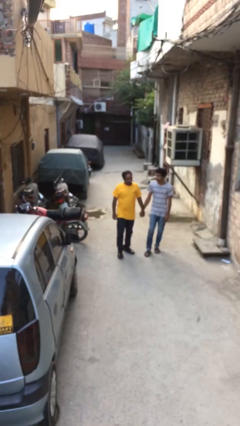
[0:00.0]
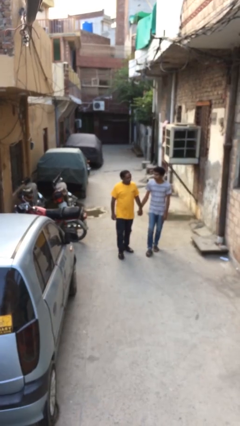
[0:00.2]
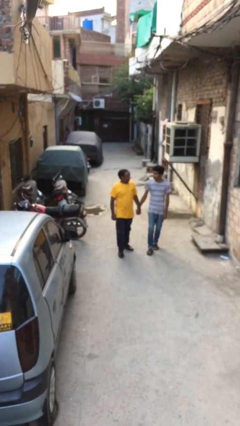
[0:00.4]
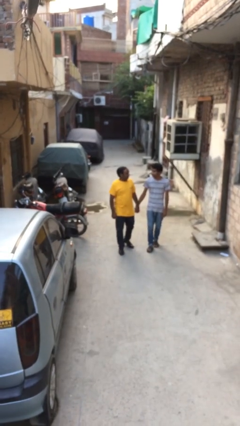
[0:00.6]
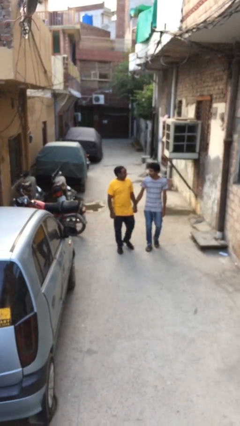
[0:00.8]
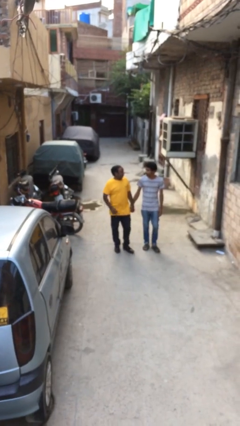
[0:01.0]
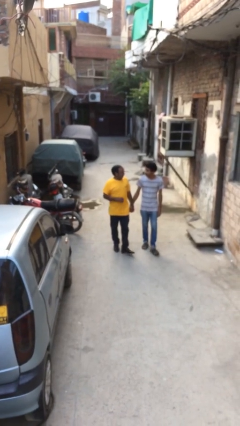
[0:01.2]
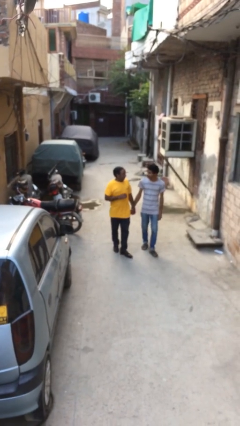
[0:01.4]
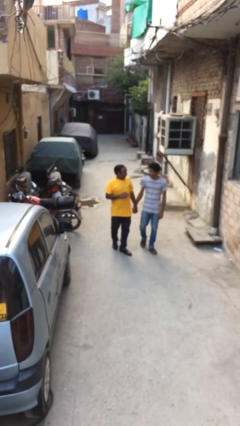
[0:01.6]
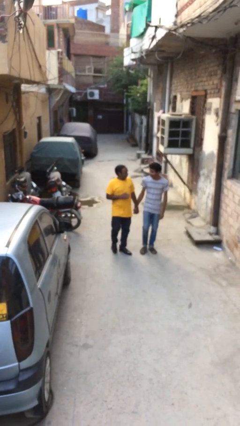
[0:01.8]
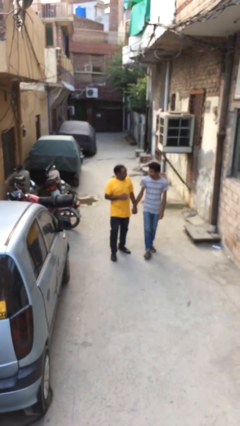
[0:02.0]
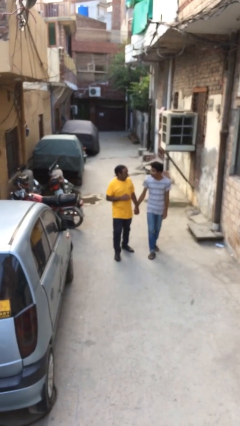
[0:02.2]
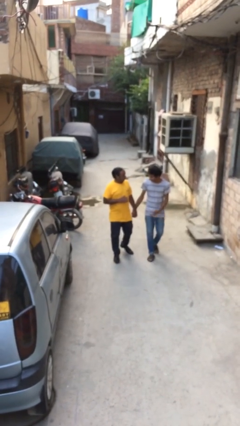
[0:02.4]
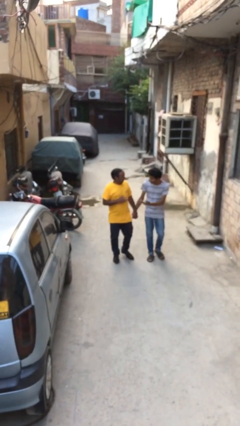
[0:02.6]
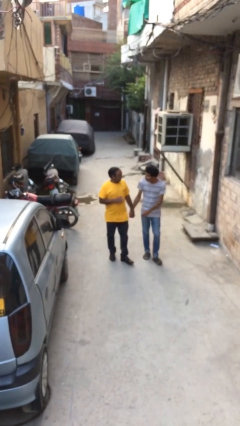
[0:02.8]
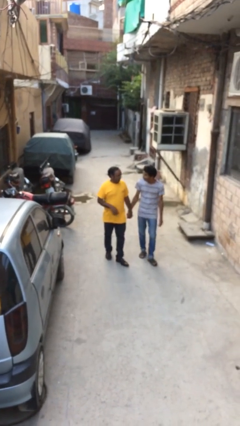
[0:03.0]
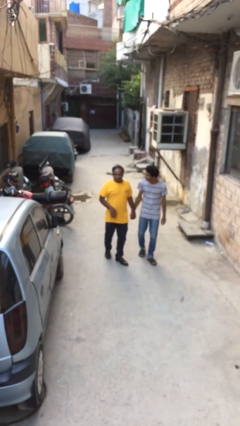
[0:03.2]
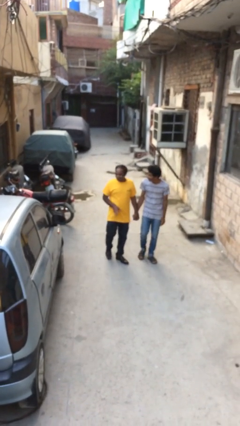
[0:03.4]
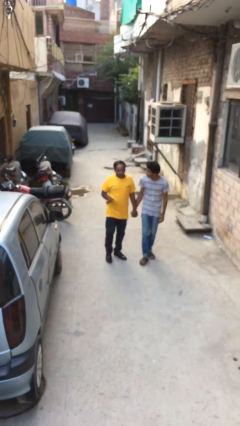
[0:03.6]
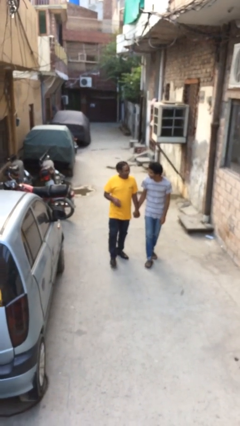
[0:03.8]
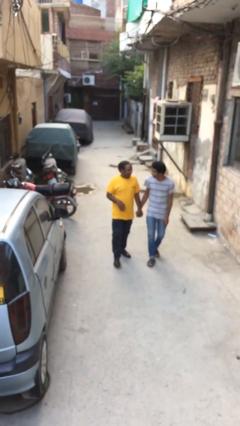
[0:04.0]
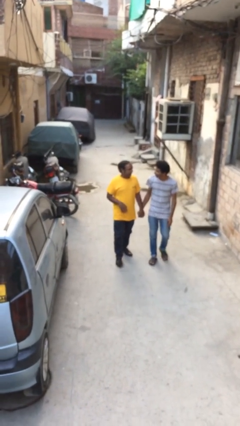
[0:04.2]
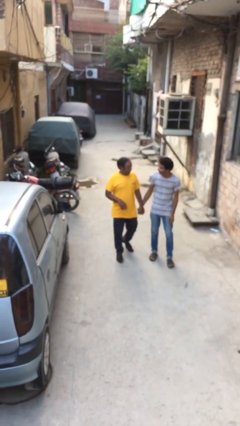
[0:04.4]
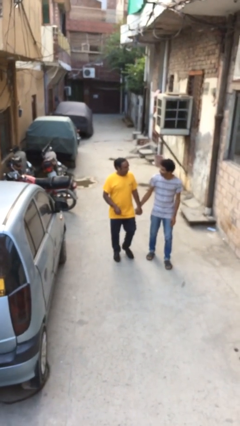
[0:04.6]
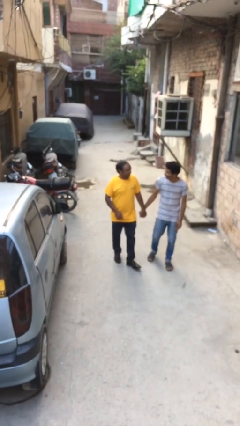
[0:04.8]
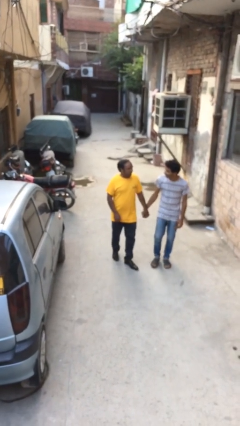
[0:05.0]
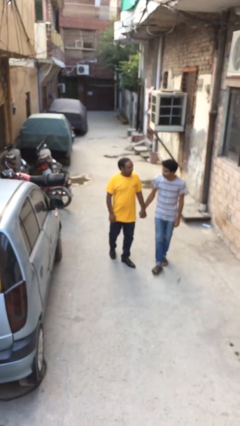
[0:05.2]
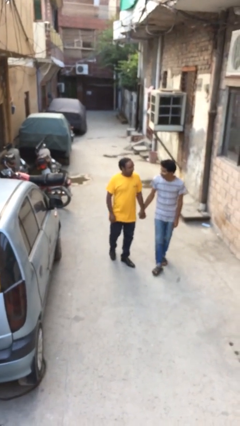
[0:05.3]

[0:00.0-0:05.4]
person holds hand

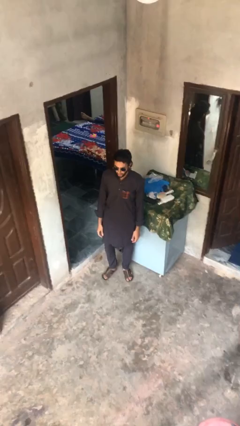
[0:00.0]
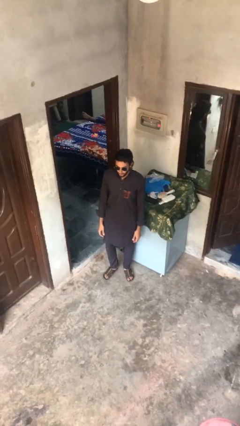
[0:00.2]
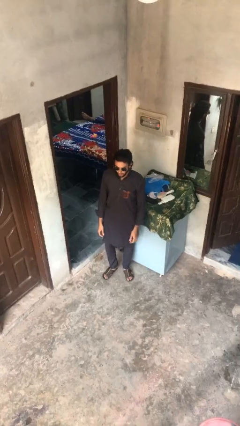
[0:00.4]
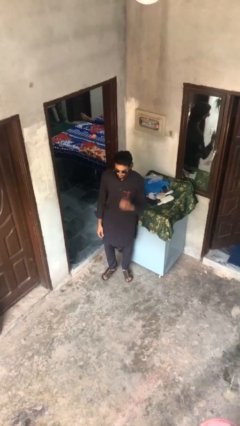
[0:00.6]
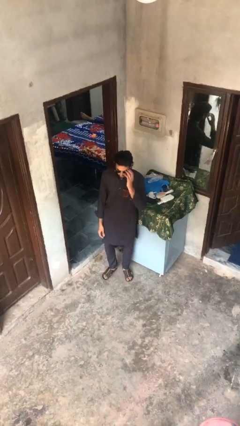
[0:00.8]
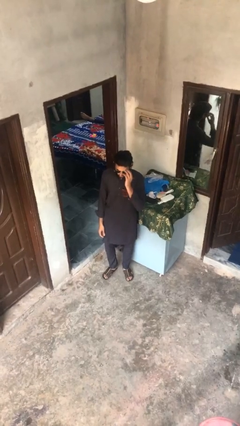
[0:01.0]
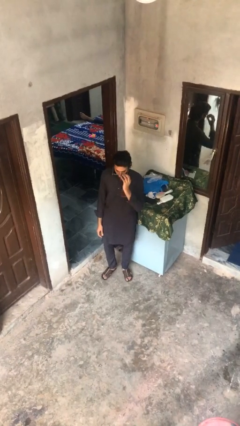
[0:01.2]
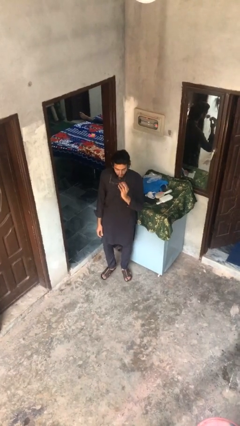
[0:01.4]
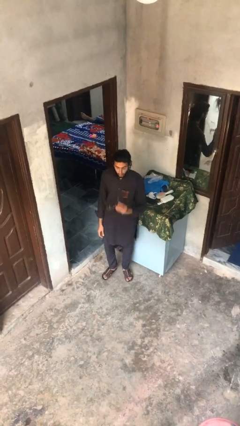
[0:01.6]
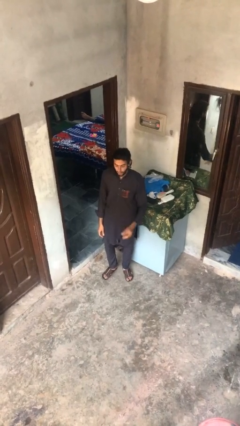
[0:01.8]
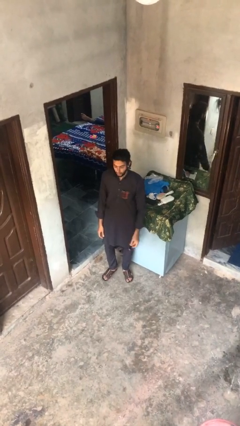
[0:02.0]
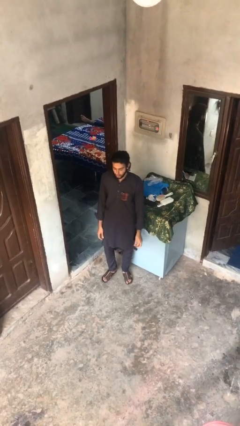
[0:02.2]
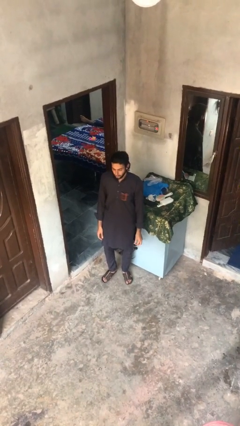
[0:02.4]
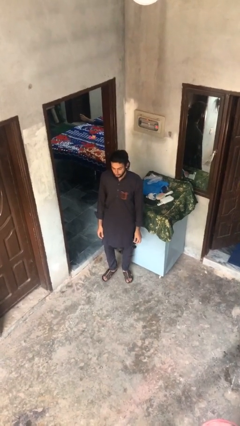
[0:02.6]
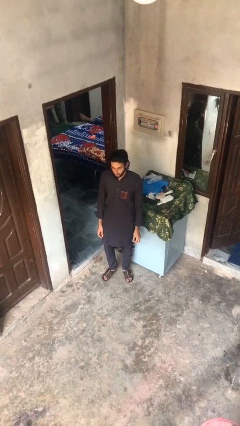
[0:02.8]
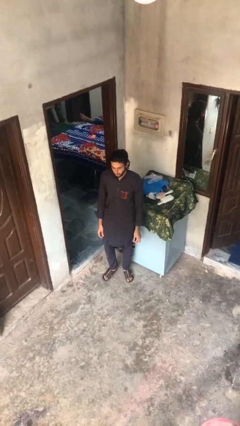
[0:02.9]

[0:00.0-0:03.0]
person takes off sunglasses

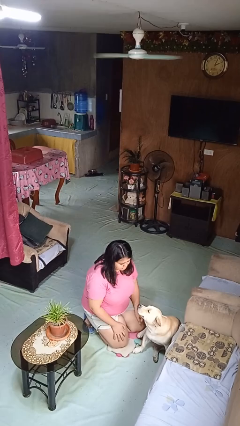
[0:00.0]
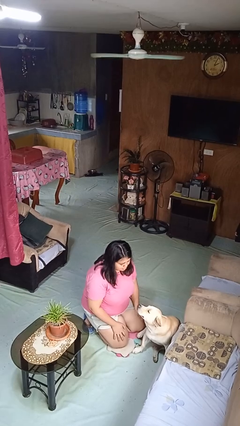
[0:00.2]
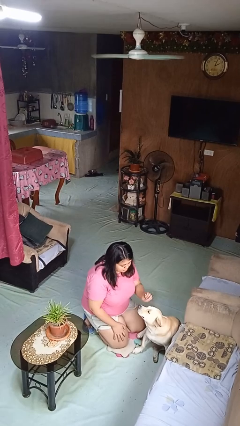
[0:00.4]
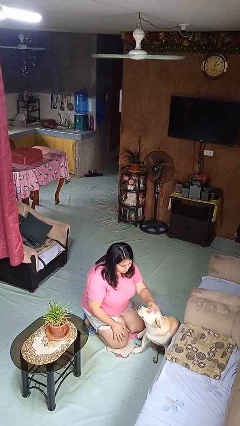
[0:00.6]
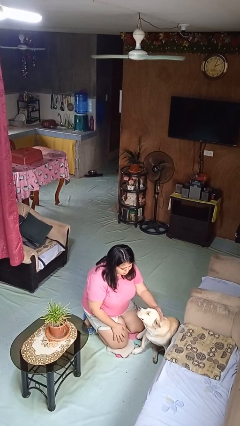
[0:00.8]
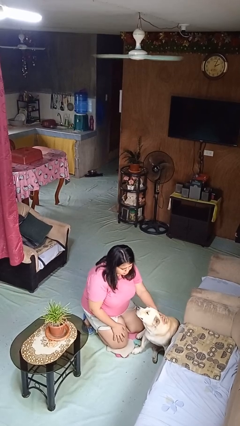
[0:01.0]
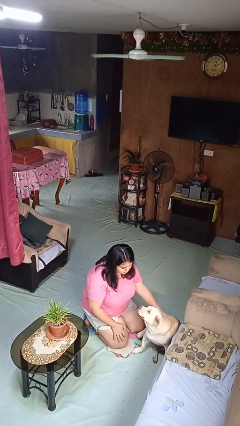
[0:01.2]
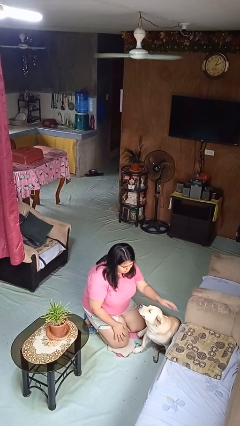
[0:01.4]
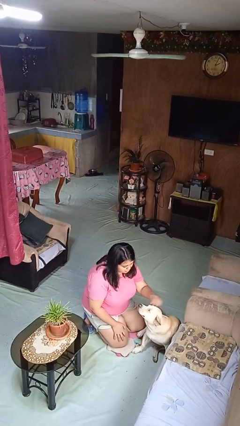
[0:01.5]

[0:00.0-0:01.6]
person pets dog

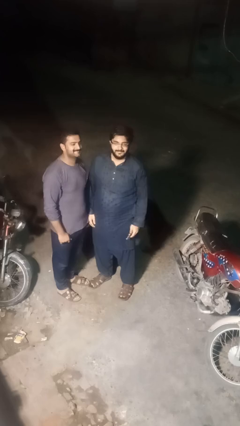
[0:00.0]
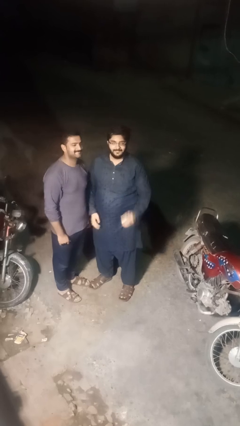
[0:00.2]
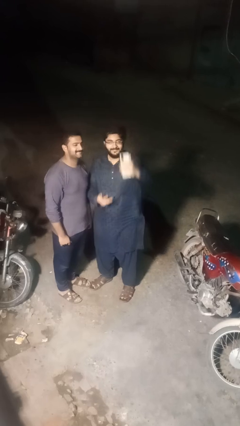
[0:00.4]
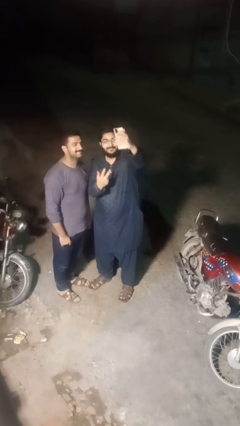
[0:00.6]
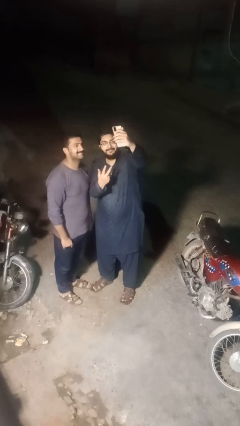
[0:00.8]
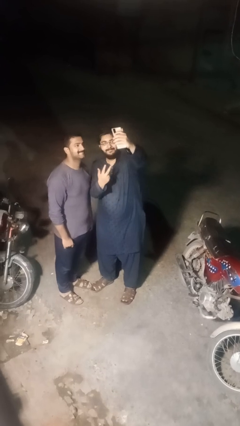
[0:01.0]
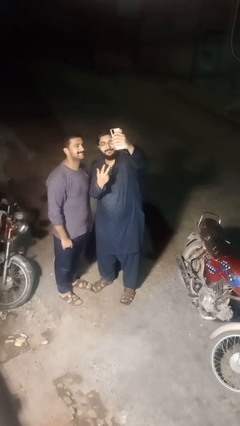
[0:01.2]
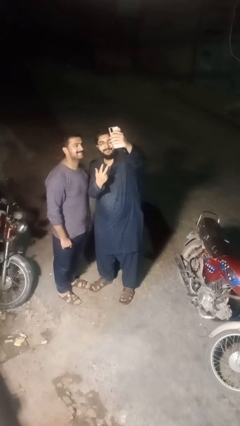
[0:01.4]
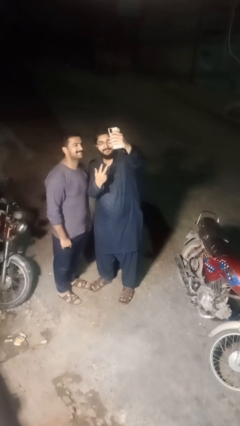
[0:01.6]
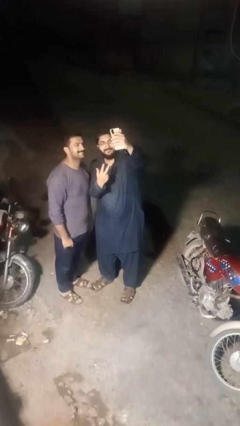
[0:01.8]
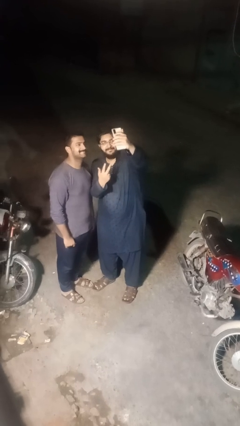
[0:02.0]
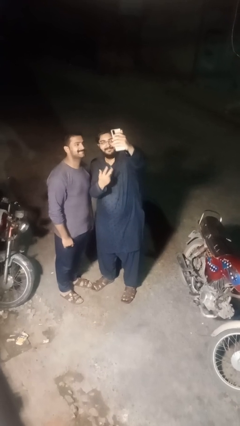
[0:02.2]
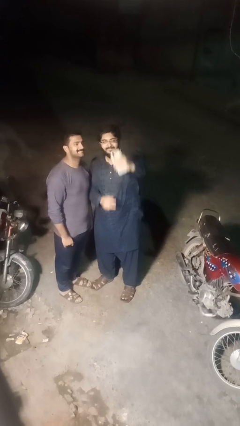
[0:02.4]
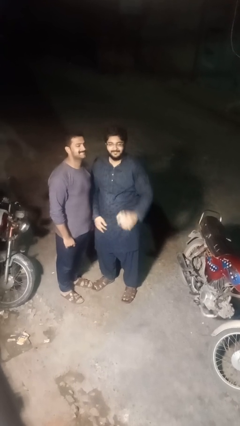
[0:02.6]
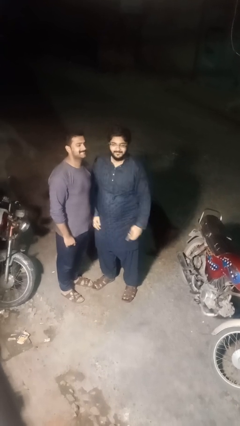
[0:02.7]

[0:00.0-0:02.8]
person takes selfie with person

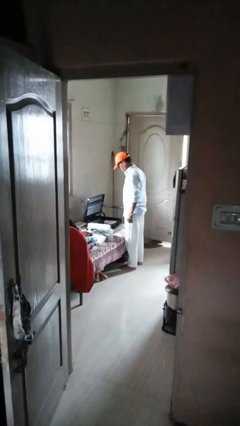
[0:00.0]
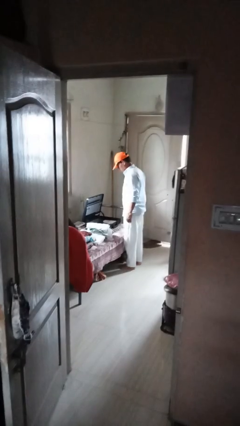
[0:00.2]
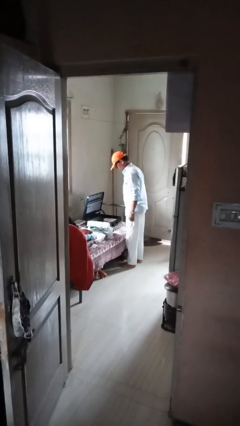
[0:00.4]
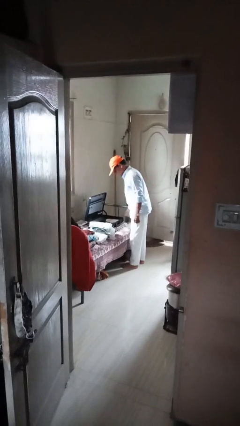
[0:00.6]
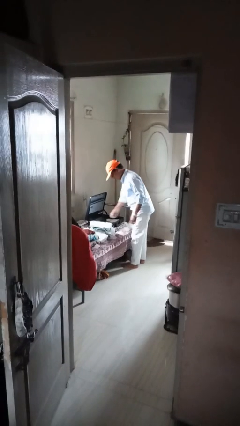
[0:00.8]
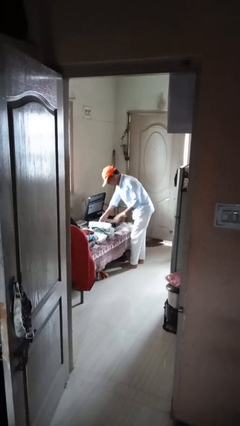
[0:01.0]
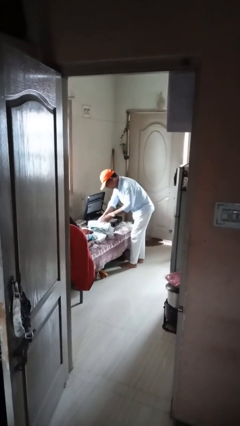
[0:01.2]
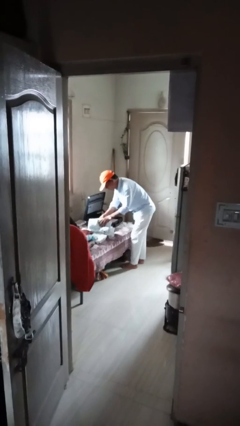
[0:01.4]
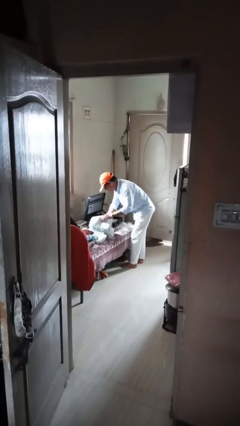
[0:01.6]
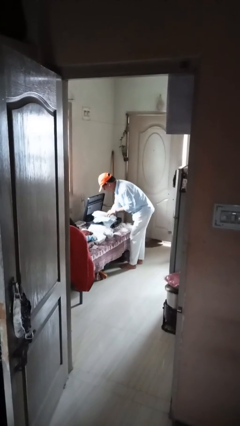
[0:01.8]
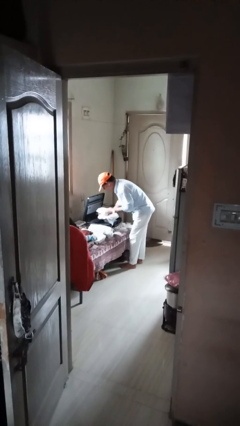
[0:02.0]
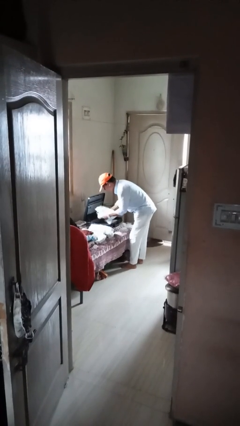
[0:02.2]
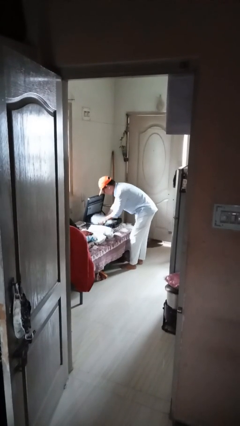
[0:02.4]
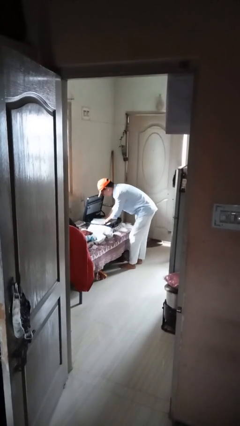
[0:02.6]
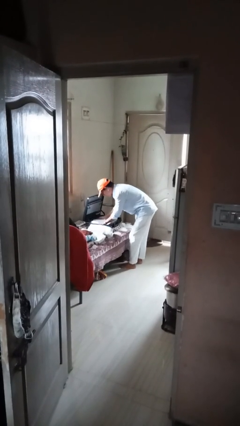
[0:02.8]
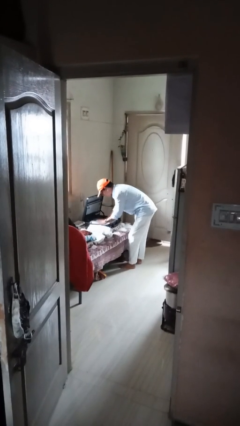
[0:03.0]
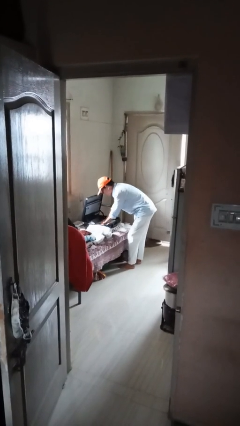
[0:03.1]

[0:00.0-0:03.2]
person loads clothes into suitcase

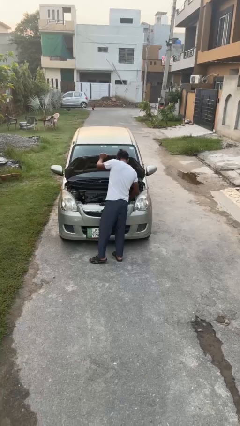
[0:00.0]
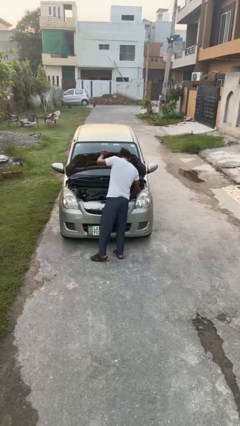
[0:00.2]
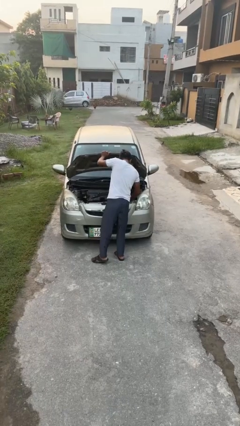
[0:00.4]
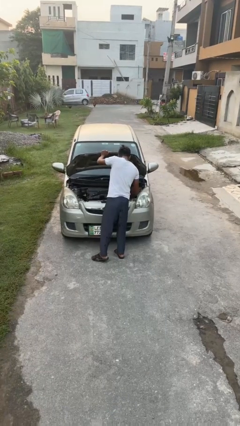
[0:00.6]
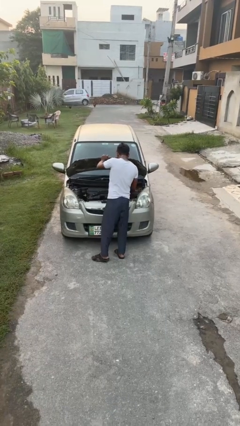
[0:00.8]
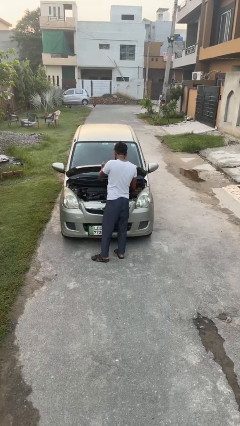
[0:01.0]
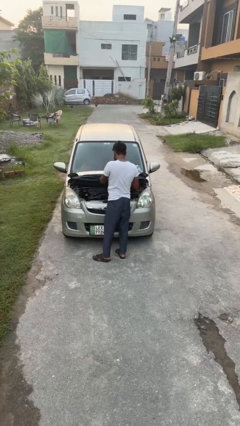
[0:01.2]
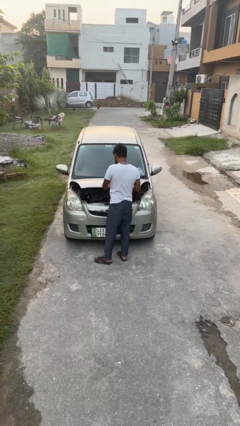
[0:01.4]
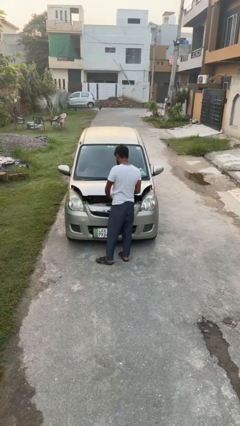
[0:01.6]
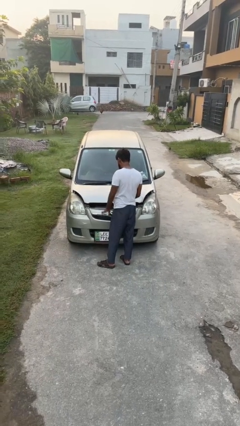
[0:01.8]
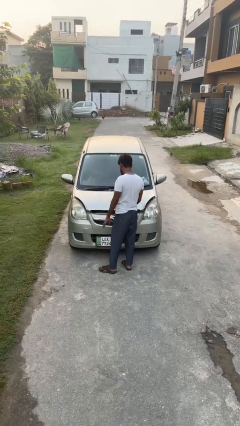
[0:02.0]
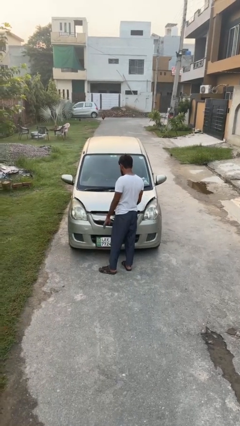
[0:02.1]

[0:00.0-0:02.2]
person closes car hood
